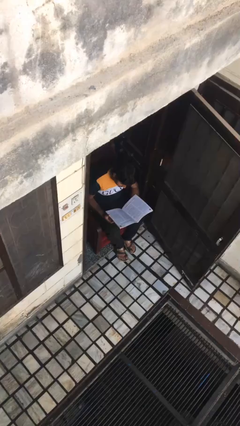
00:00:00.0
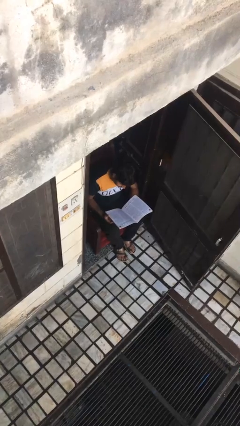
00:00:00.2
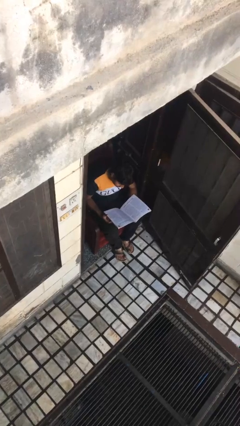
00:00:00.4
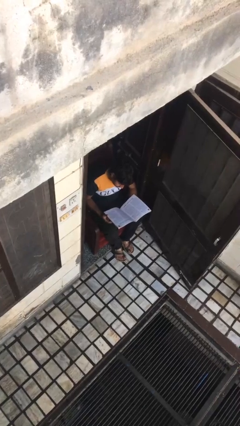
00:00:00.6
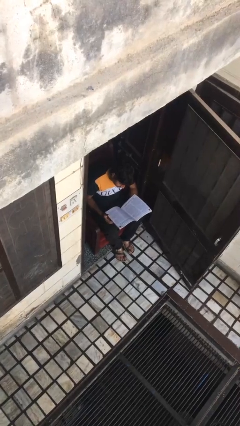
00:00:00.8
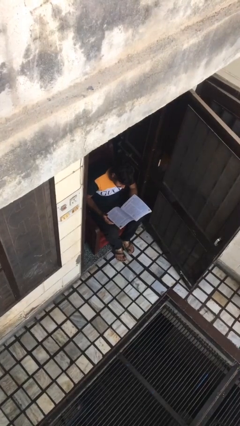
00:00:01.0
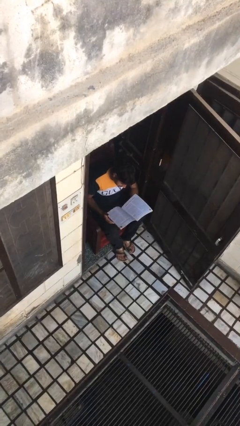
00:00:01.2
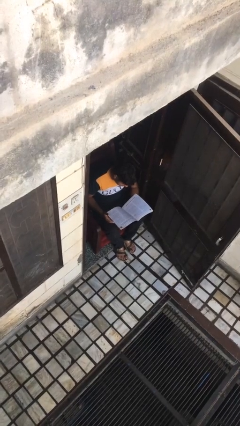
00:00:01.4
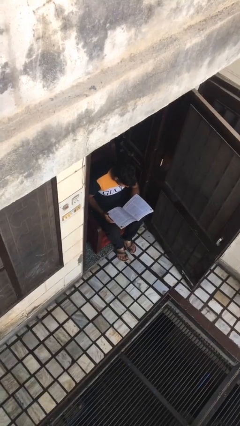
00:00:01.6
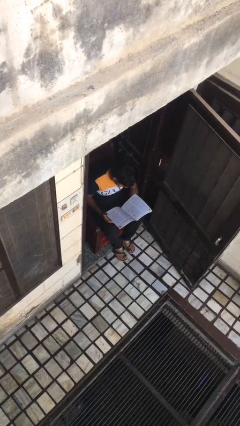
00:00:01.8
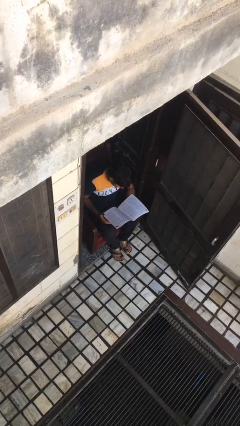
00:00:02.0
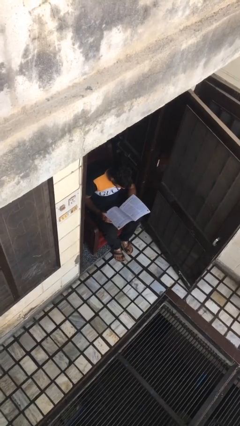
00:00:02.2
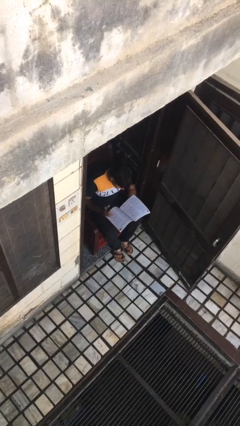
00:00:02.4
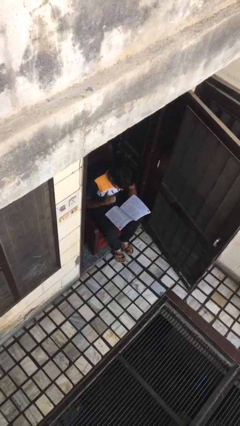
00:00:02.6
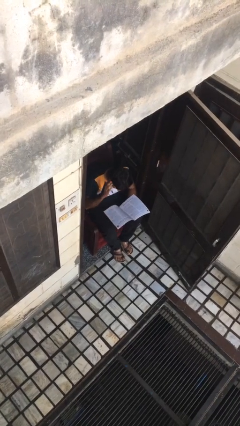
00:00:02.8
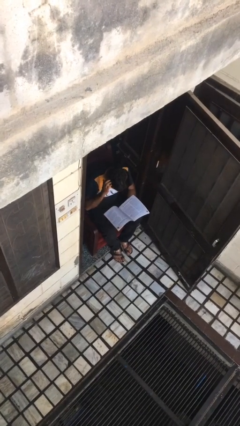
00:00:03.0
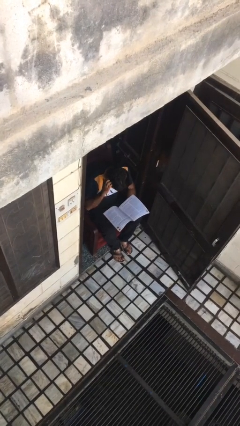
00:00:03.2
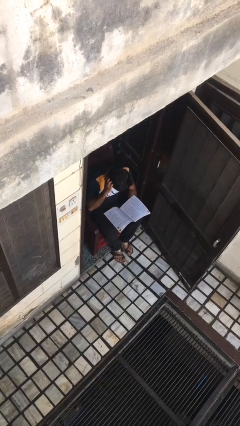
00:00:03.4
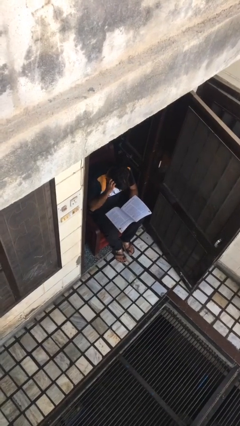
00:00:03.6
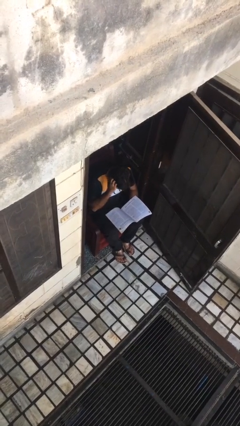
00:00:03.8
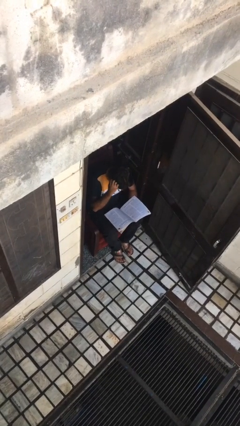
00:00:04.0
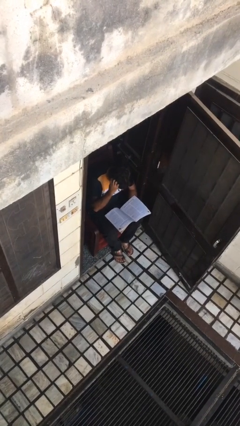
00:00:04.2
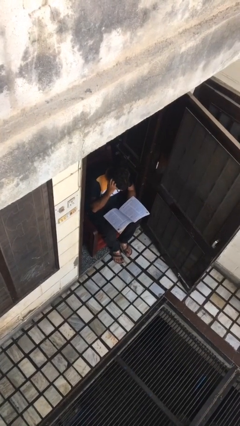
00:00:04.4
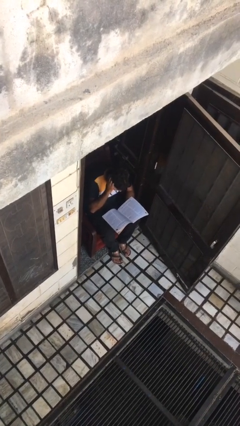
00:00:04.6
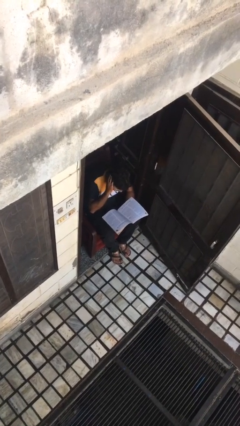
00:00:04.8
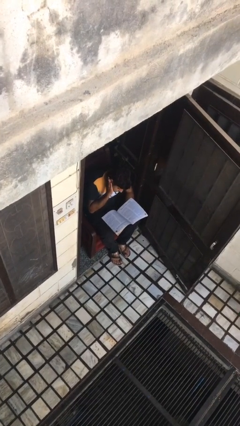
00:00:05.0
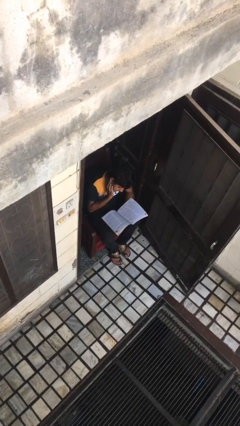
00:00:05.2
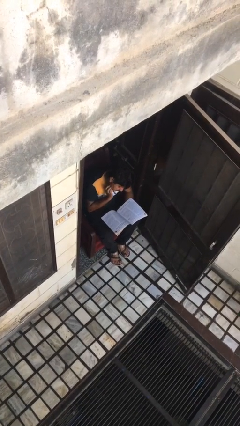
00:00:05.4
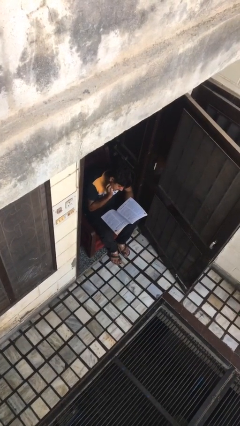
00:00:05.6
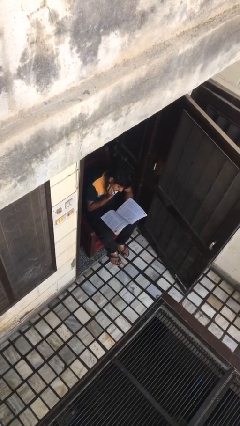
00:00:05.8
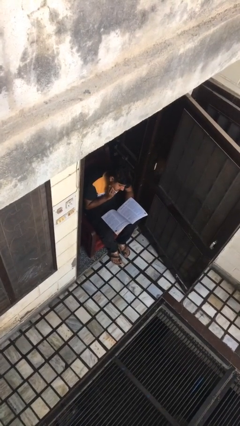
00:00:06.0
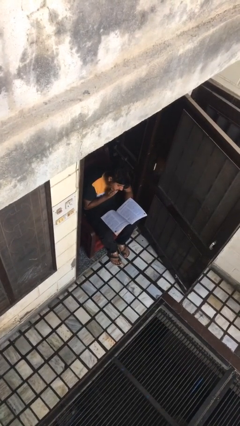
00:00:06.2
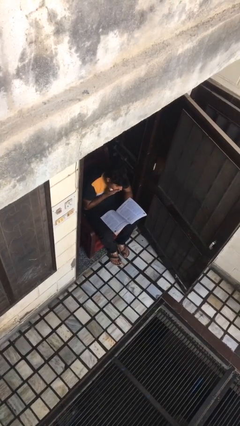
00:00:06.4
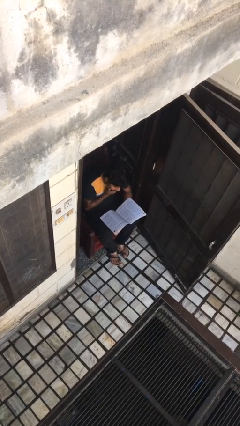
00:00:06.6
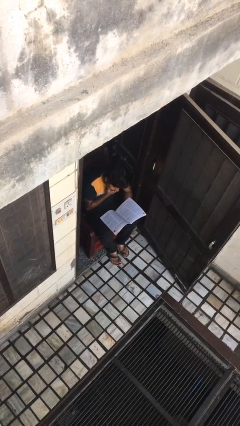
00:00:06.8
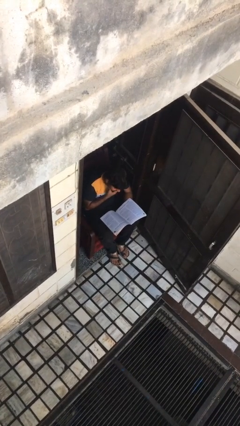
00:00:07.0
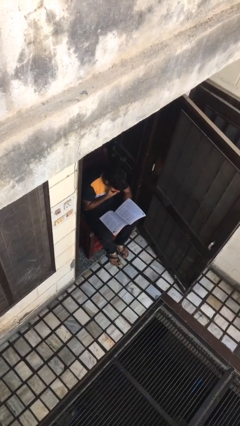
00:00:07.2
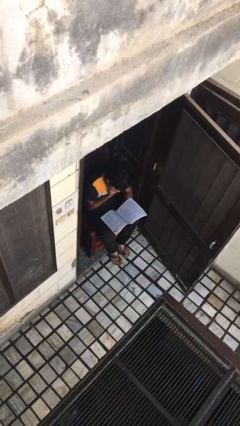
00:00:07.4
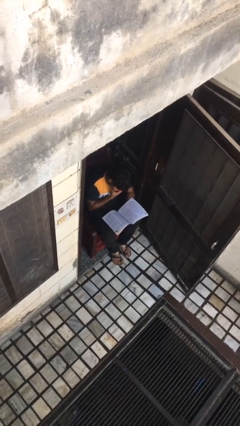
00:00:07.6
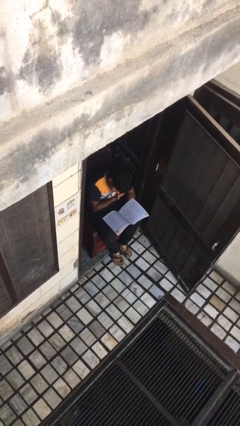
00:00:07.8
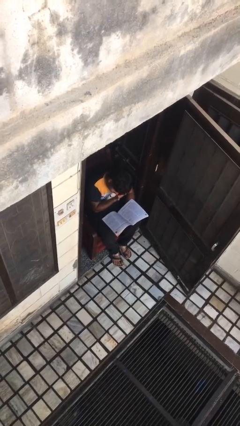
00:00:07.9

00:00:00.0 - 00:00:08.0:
person reads document

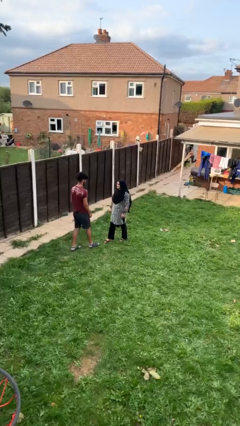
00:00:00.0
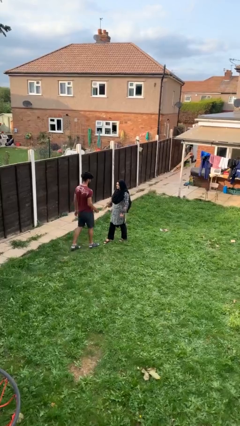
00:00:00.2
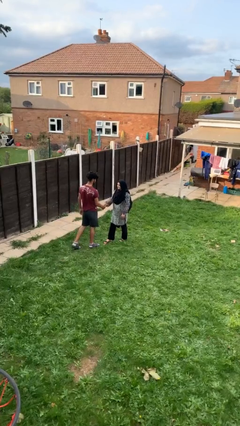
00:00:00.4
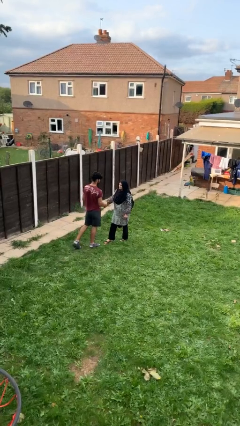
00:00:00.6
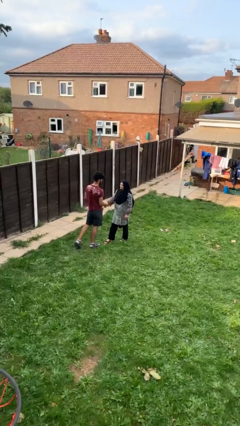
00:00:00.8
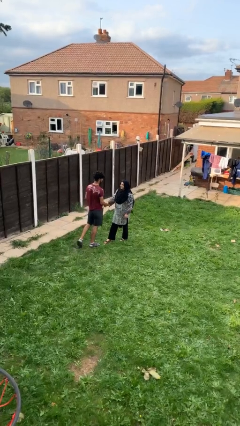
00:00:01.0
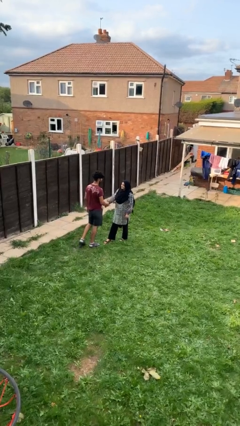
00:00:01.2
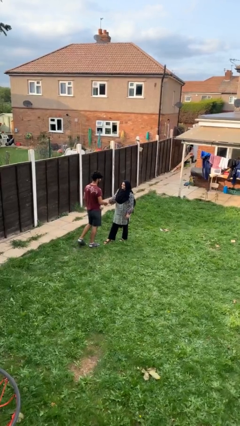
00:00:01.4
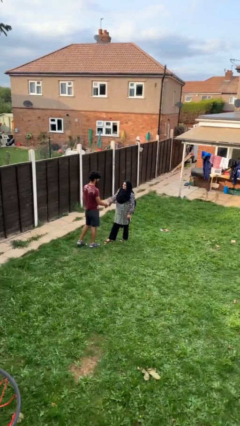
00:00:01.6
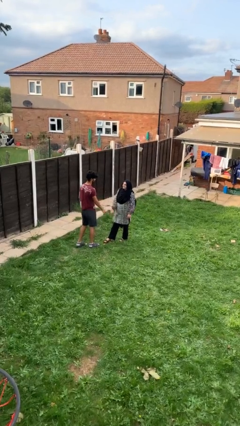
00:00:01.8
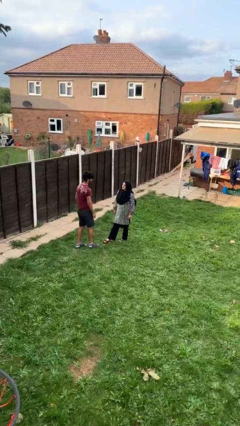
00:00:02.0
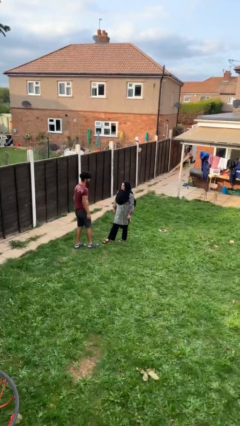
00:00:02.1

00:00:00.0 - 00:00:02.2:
person shakes hand

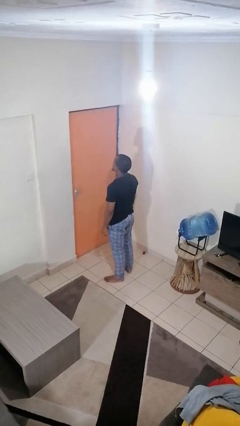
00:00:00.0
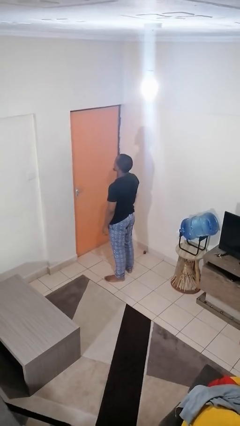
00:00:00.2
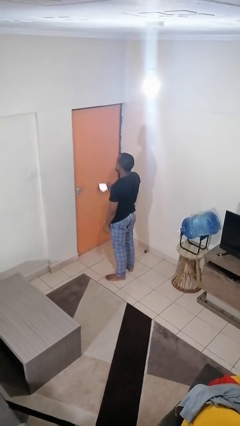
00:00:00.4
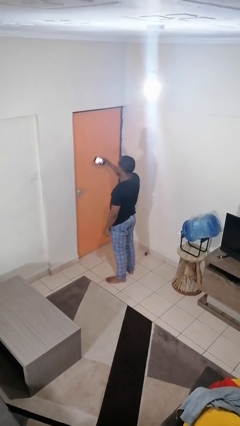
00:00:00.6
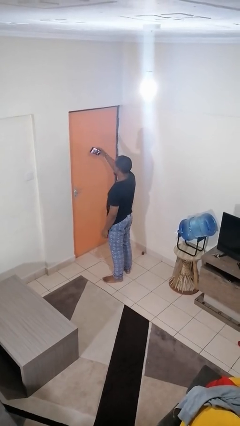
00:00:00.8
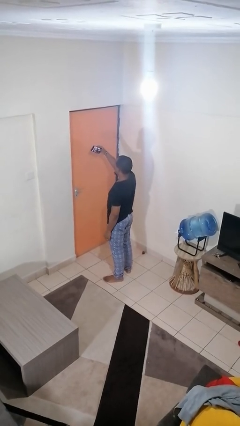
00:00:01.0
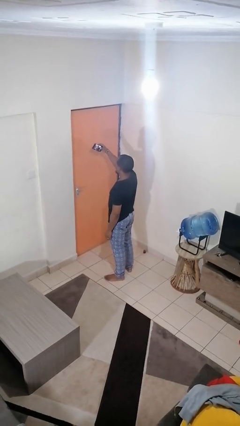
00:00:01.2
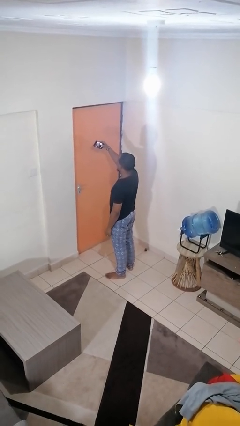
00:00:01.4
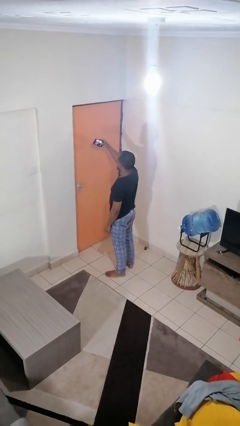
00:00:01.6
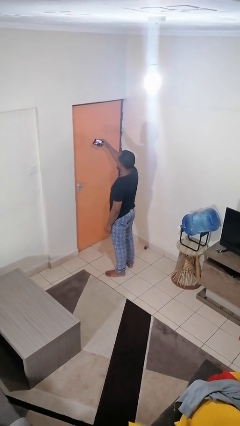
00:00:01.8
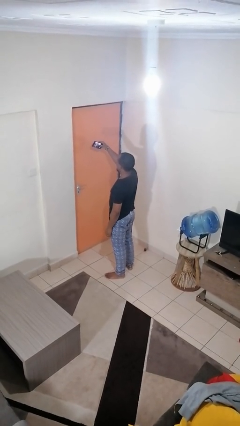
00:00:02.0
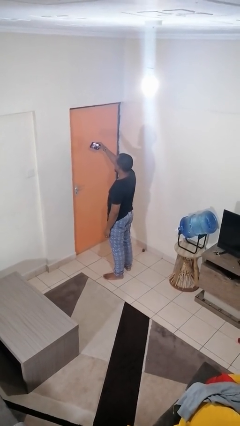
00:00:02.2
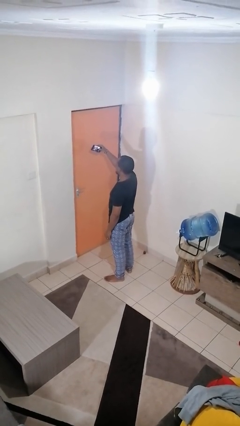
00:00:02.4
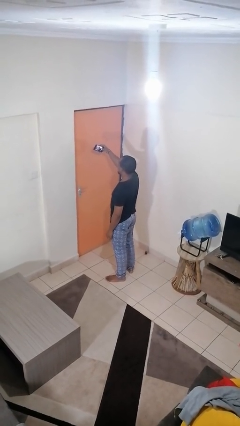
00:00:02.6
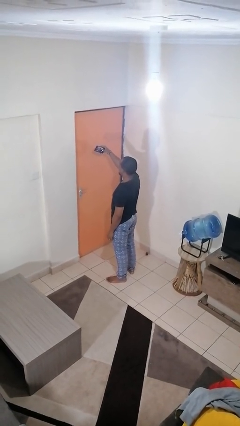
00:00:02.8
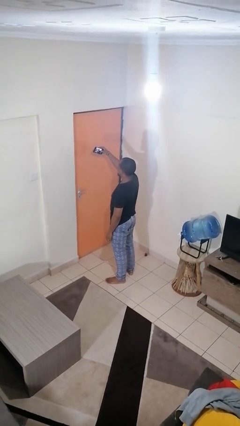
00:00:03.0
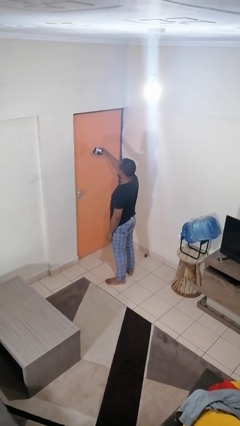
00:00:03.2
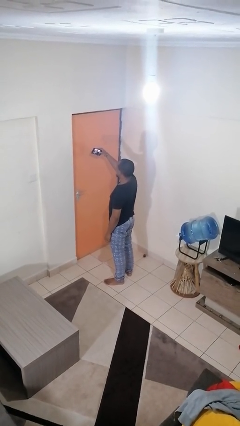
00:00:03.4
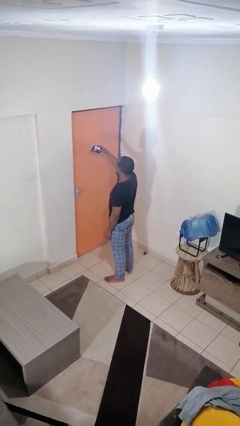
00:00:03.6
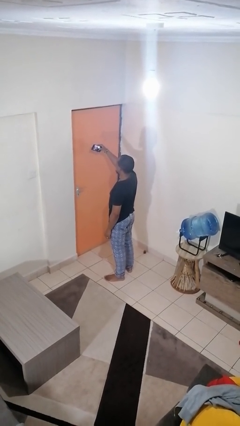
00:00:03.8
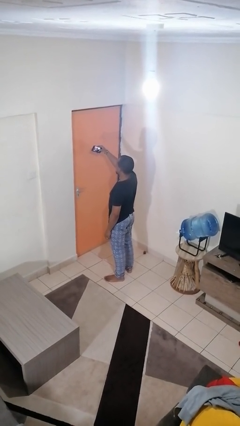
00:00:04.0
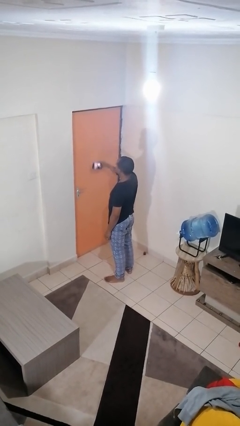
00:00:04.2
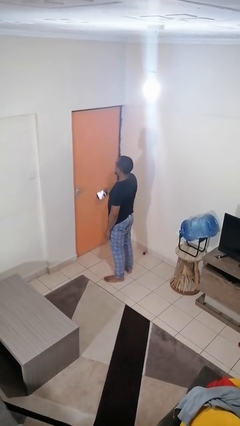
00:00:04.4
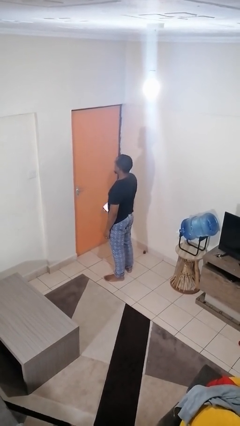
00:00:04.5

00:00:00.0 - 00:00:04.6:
person takes selfie

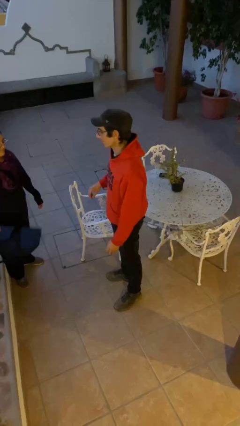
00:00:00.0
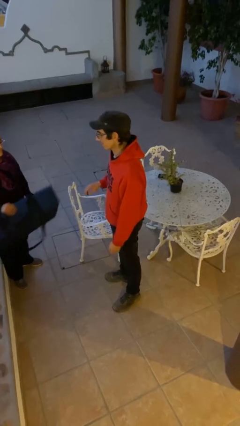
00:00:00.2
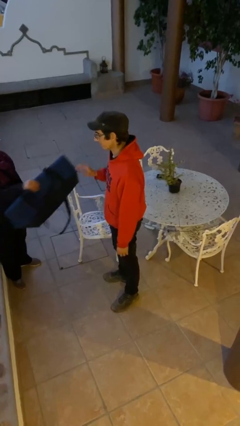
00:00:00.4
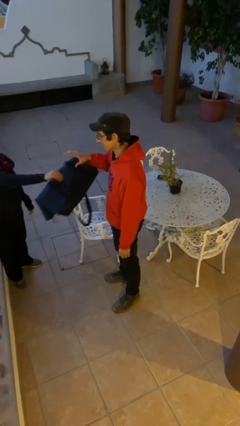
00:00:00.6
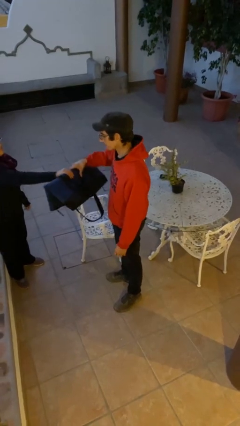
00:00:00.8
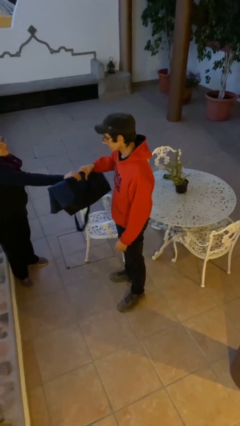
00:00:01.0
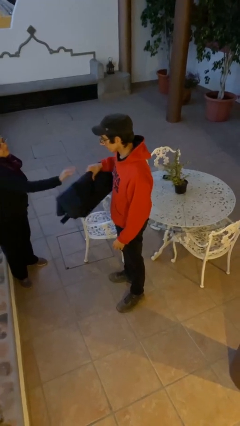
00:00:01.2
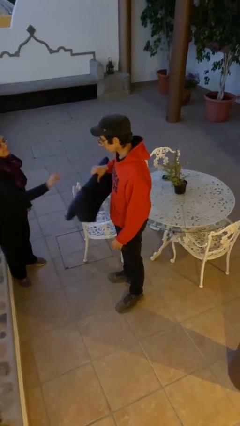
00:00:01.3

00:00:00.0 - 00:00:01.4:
person transfers object to person

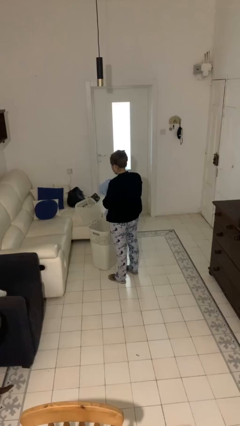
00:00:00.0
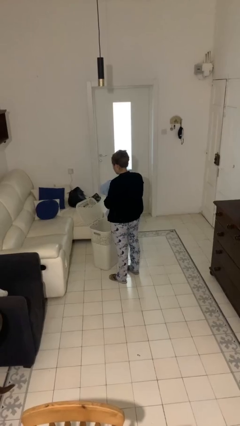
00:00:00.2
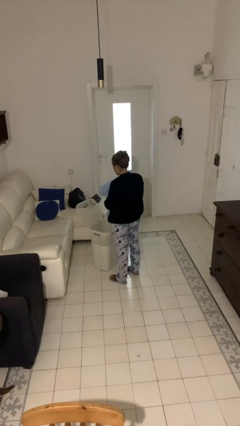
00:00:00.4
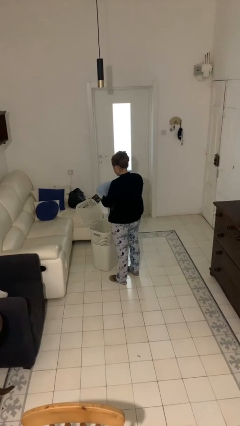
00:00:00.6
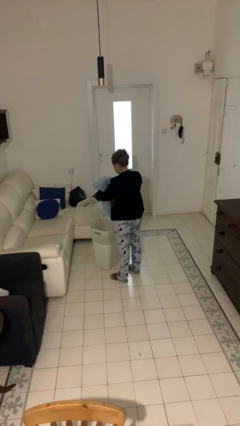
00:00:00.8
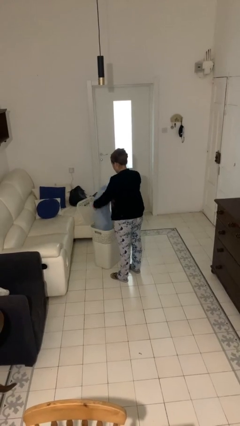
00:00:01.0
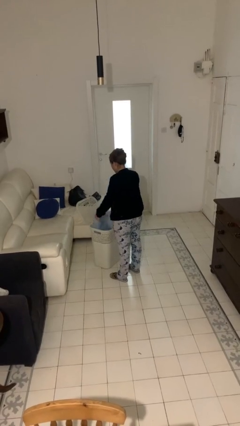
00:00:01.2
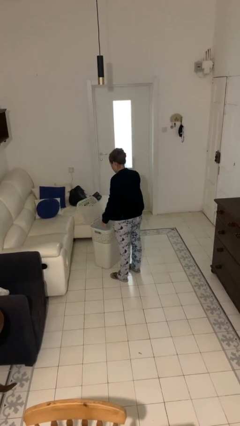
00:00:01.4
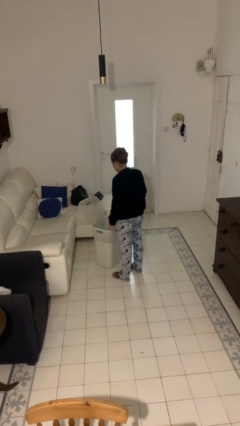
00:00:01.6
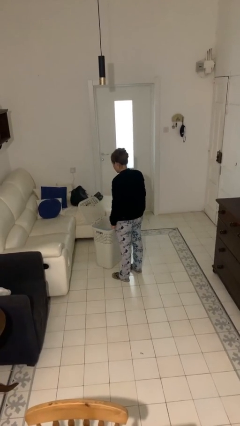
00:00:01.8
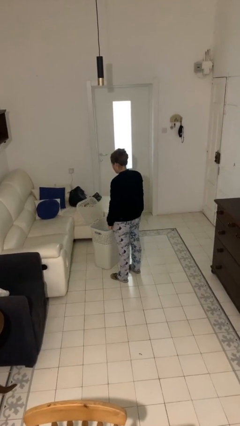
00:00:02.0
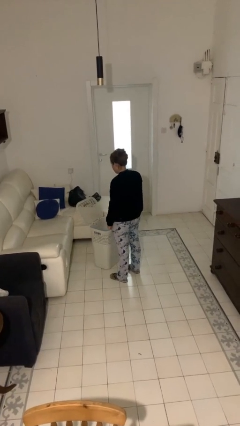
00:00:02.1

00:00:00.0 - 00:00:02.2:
person puts object into basket
